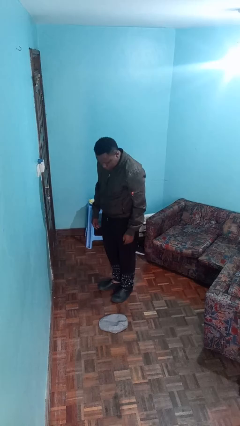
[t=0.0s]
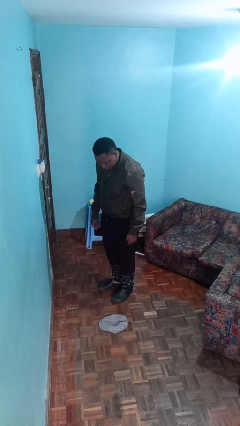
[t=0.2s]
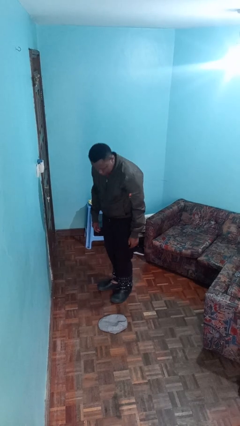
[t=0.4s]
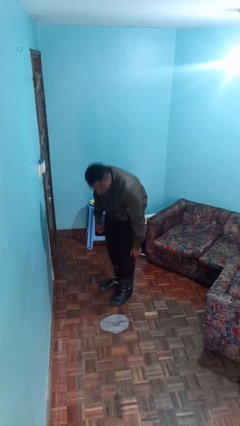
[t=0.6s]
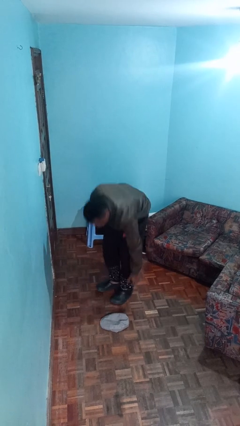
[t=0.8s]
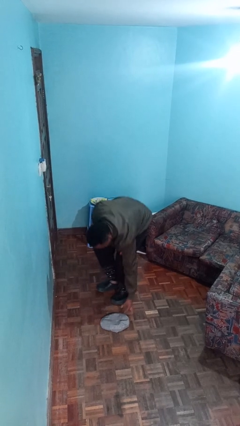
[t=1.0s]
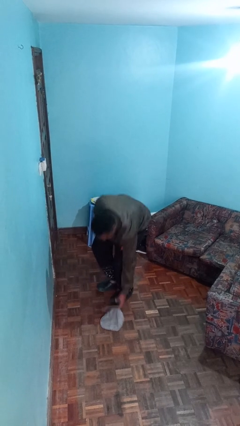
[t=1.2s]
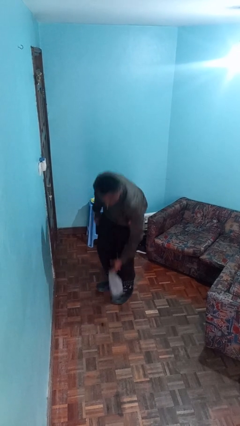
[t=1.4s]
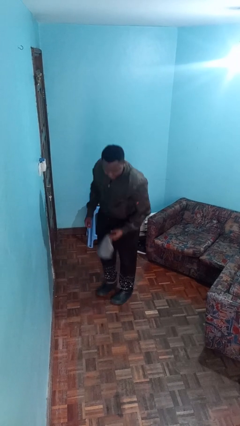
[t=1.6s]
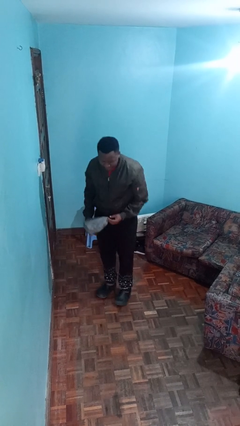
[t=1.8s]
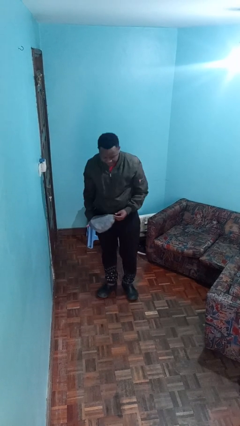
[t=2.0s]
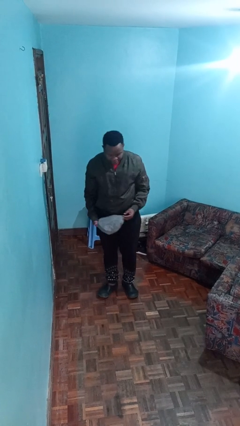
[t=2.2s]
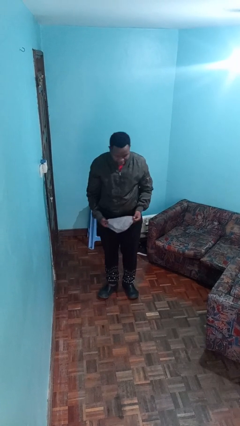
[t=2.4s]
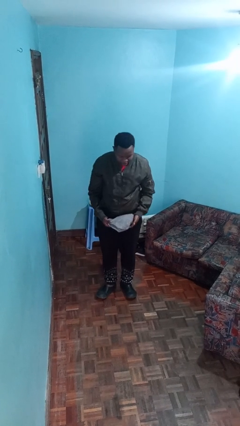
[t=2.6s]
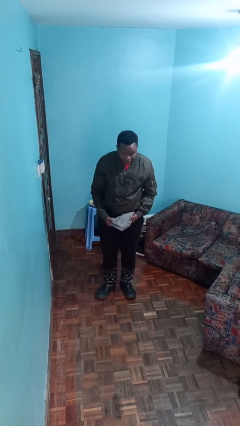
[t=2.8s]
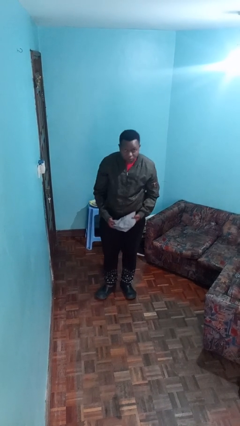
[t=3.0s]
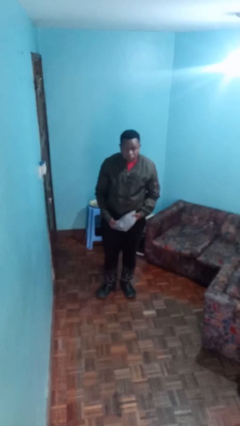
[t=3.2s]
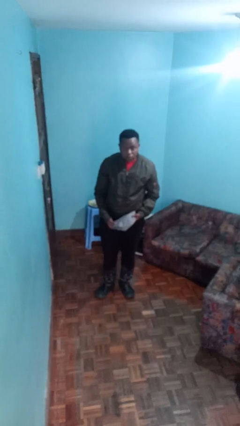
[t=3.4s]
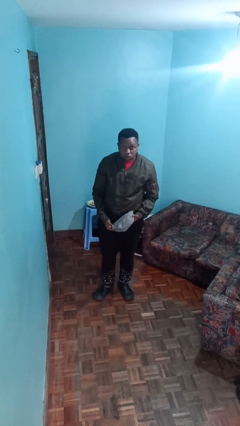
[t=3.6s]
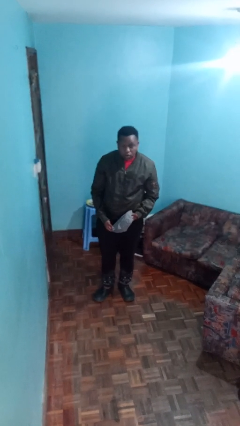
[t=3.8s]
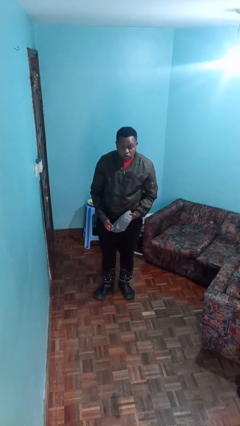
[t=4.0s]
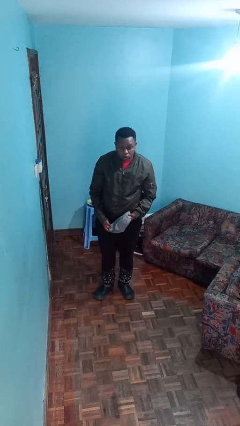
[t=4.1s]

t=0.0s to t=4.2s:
person picks up object from floor

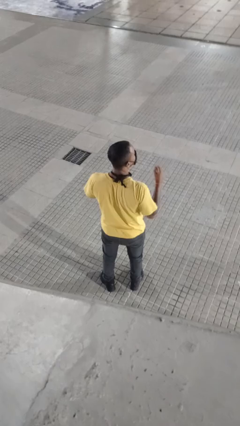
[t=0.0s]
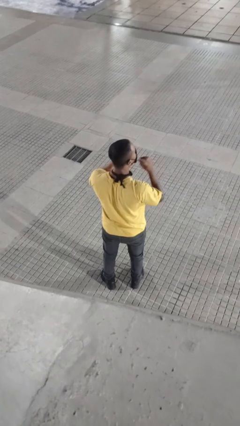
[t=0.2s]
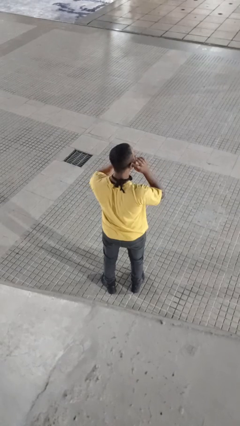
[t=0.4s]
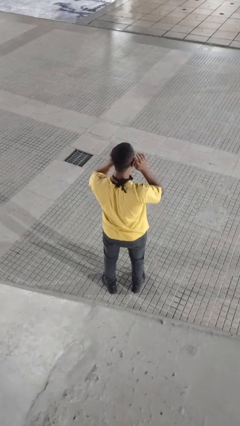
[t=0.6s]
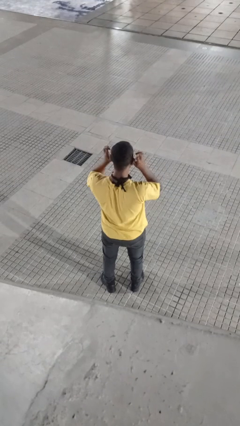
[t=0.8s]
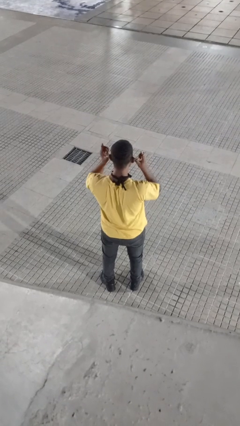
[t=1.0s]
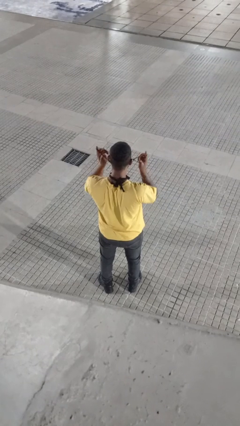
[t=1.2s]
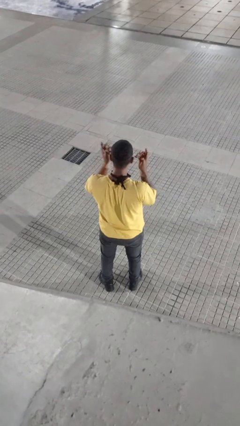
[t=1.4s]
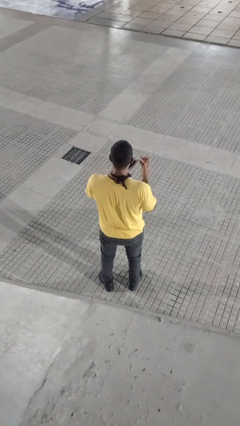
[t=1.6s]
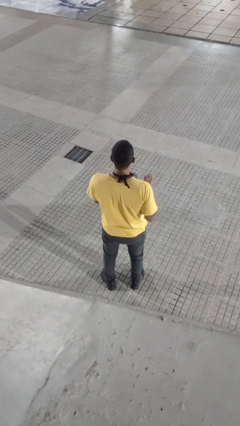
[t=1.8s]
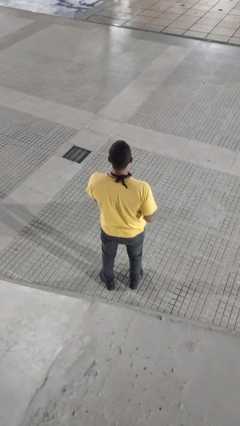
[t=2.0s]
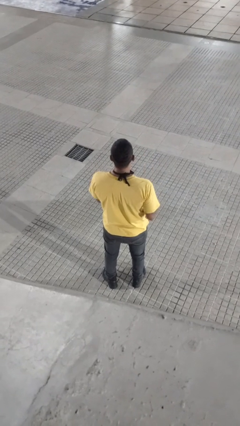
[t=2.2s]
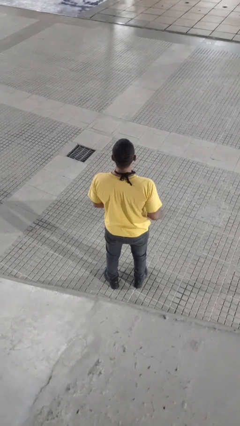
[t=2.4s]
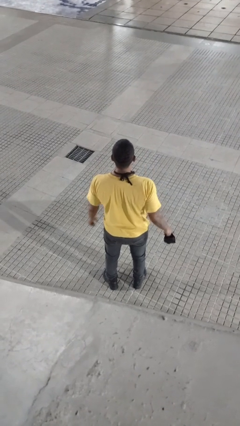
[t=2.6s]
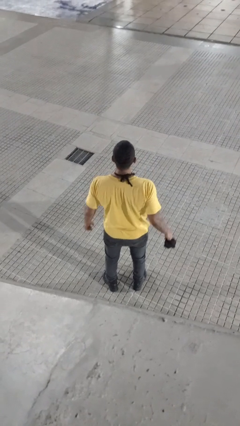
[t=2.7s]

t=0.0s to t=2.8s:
person takes off facemask

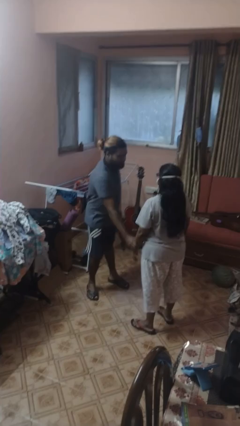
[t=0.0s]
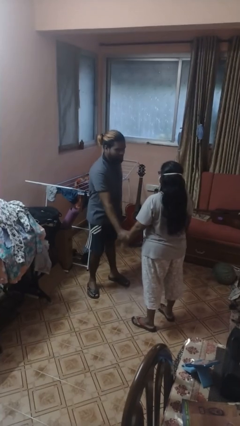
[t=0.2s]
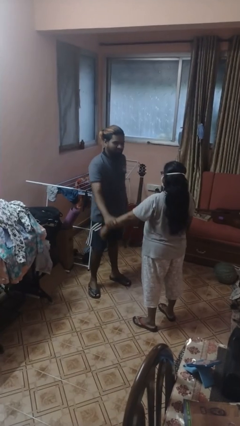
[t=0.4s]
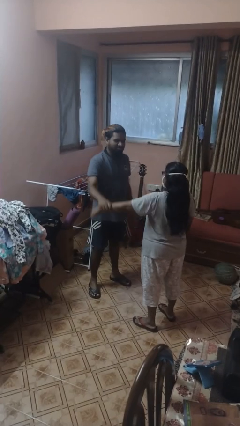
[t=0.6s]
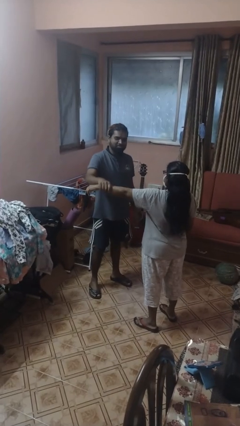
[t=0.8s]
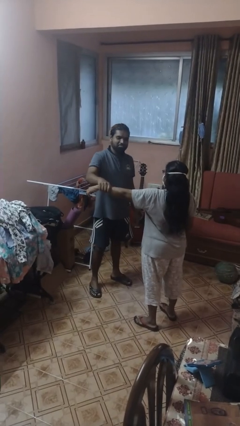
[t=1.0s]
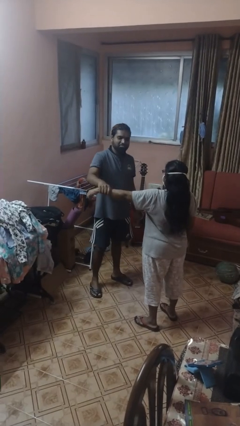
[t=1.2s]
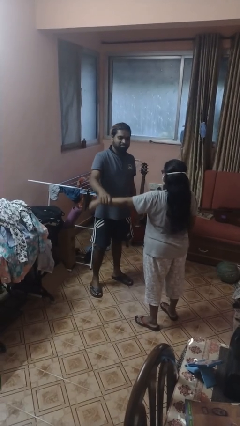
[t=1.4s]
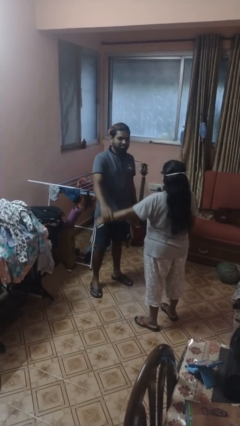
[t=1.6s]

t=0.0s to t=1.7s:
person grabs person by forearm

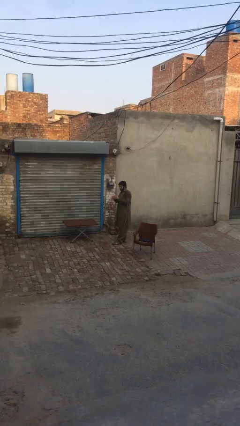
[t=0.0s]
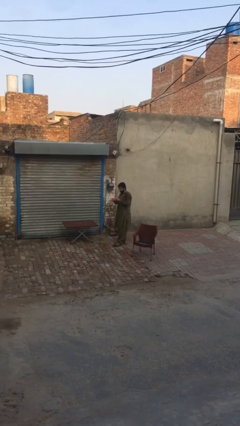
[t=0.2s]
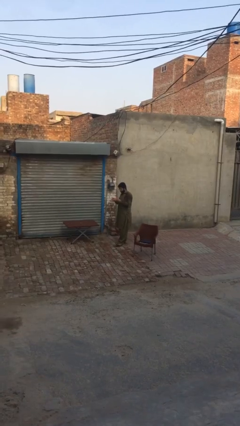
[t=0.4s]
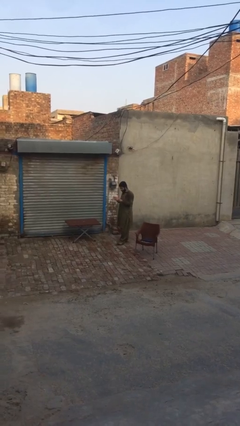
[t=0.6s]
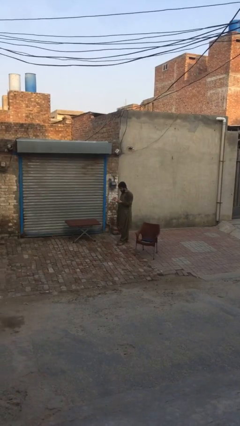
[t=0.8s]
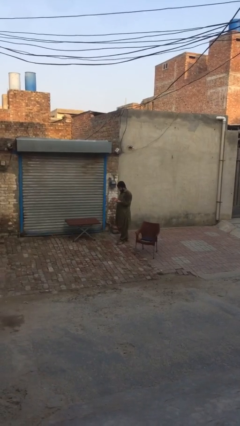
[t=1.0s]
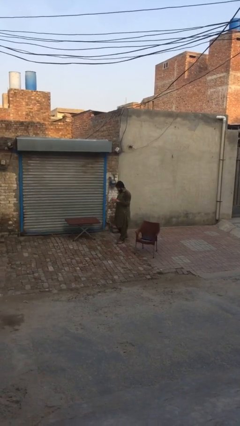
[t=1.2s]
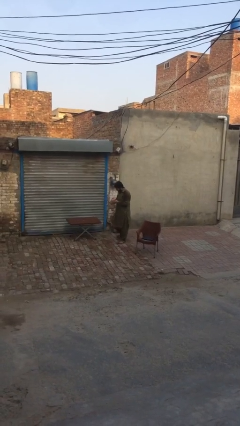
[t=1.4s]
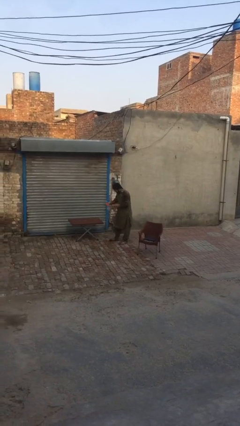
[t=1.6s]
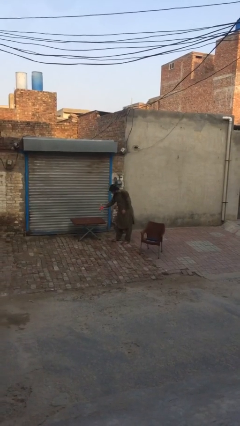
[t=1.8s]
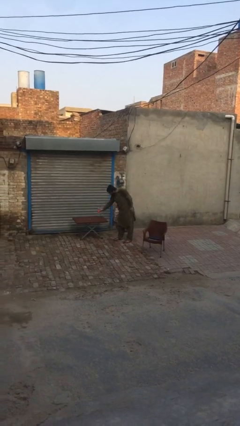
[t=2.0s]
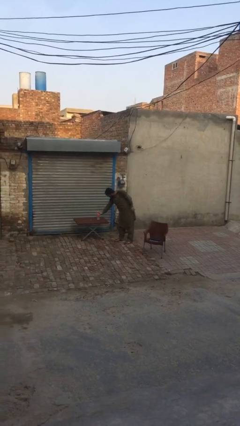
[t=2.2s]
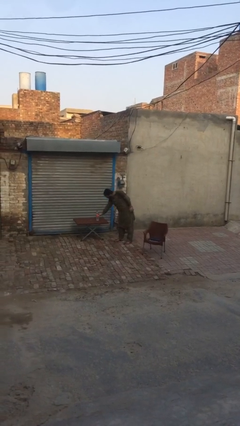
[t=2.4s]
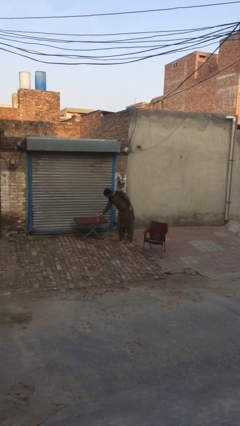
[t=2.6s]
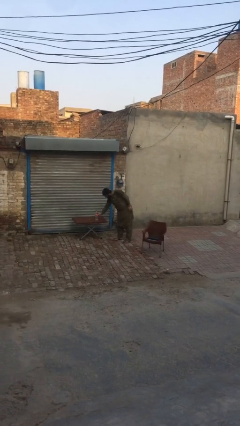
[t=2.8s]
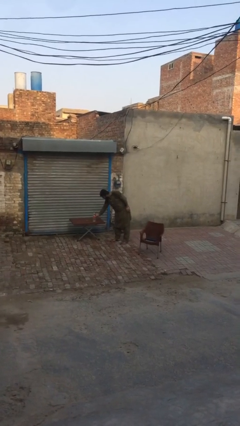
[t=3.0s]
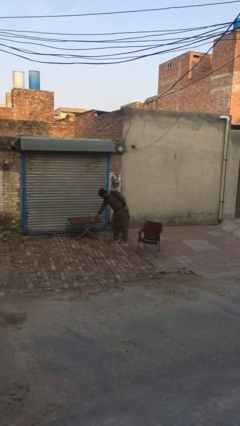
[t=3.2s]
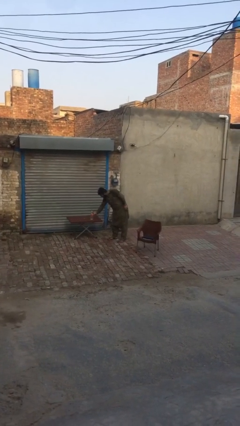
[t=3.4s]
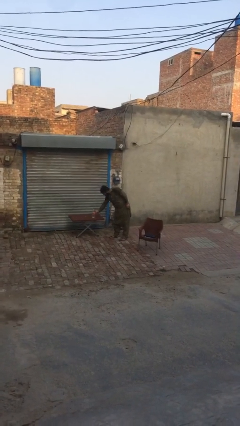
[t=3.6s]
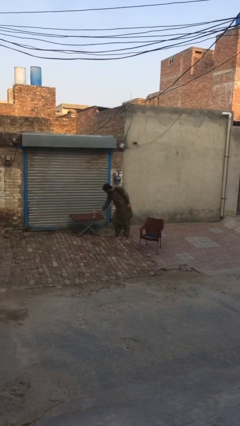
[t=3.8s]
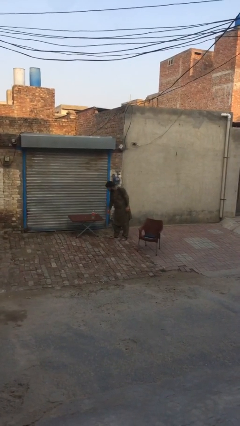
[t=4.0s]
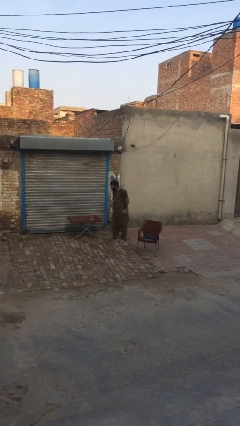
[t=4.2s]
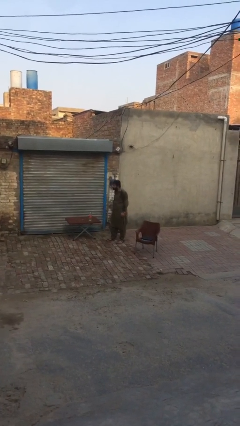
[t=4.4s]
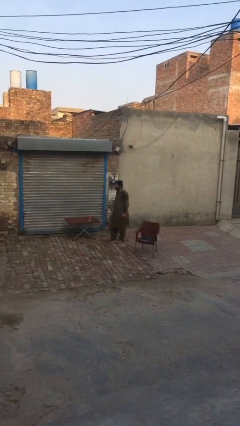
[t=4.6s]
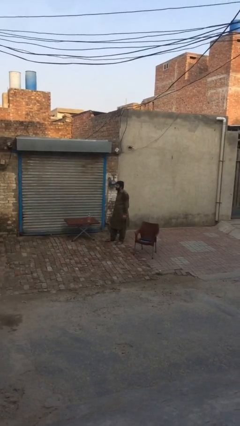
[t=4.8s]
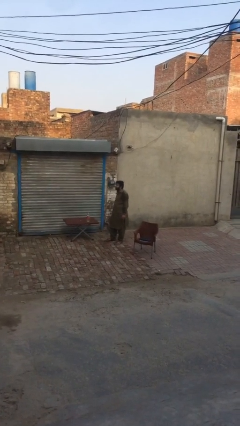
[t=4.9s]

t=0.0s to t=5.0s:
person puts down object on table

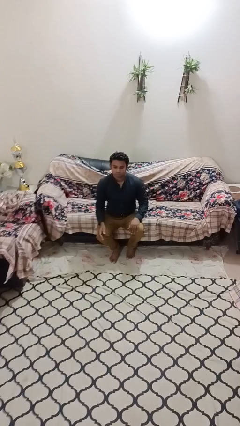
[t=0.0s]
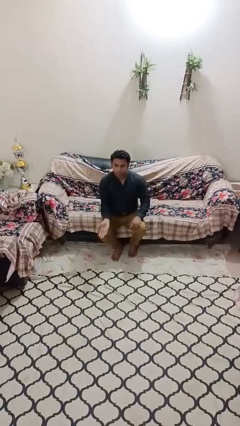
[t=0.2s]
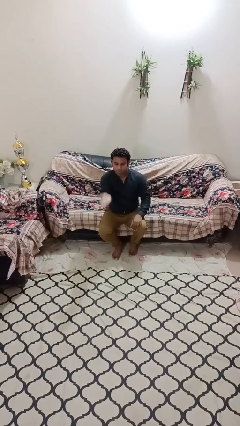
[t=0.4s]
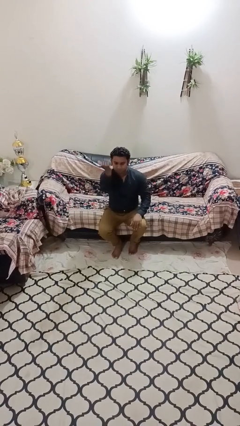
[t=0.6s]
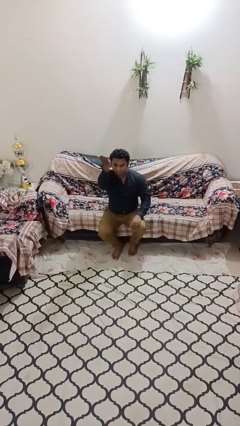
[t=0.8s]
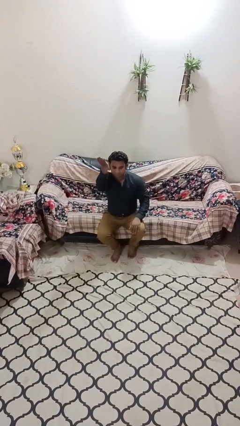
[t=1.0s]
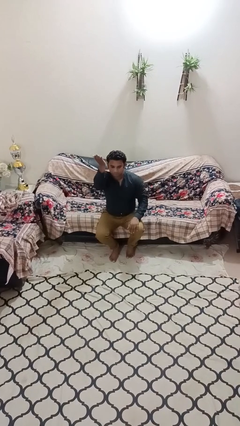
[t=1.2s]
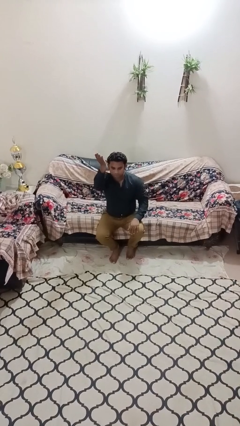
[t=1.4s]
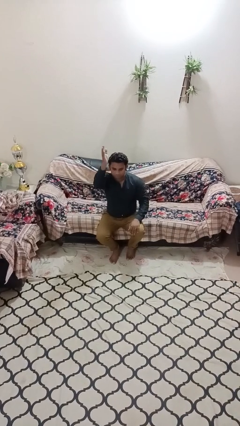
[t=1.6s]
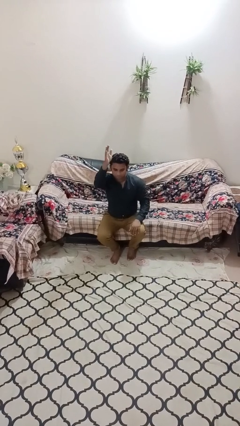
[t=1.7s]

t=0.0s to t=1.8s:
person gestures swipe up

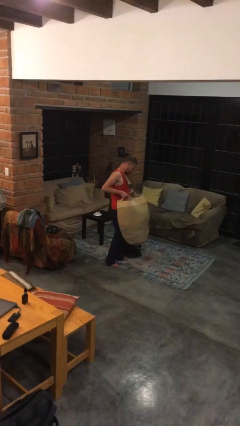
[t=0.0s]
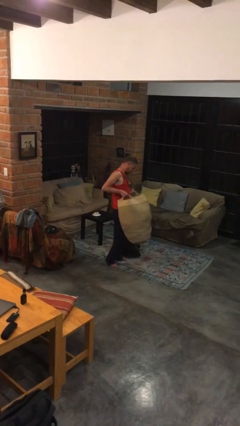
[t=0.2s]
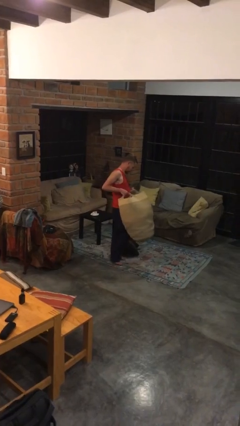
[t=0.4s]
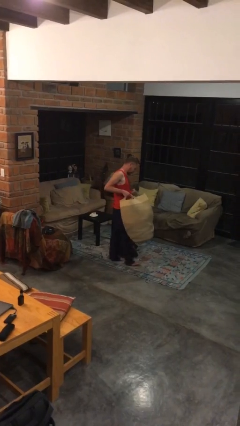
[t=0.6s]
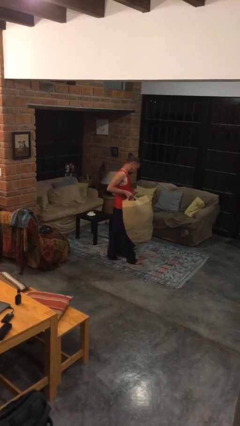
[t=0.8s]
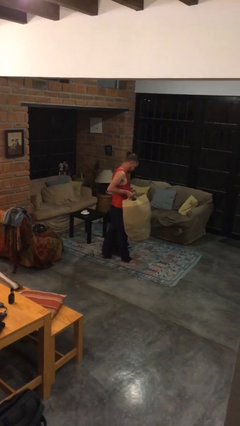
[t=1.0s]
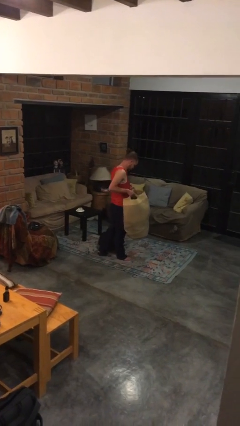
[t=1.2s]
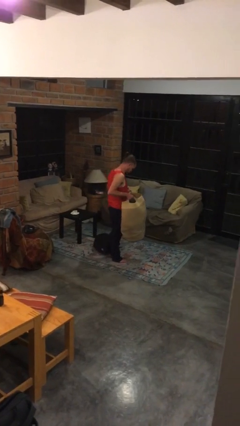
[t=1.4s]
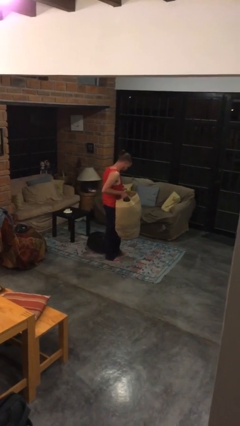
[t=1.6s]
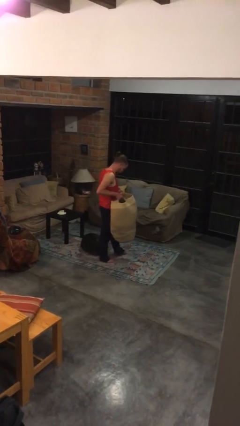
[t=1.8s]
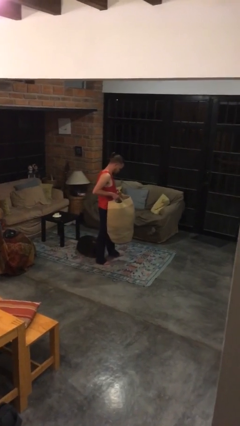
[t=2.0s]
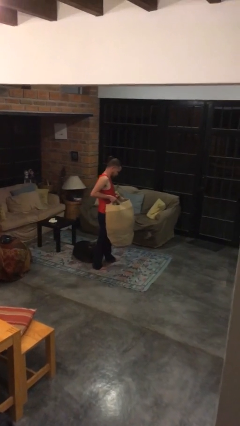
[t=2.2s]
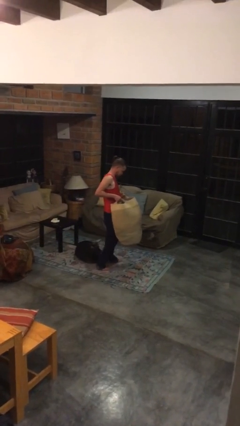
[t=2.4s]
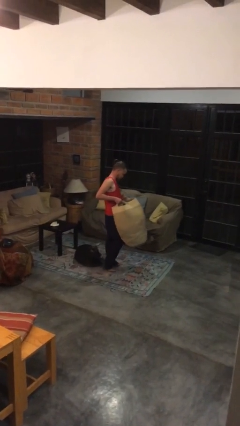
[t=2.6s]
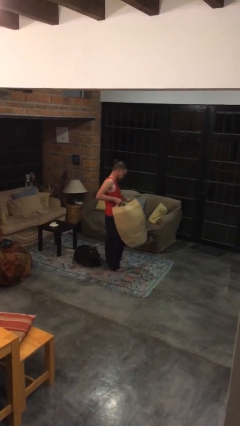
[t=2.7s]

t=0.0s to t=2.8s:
person carries laundry basket
